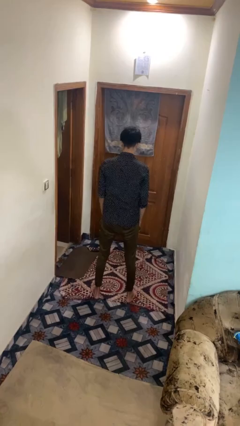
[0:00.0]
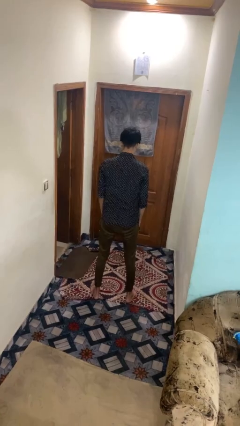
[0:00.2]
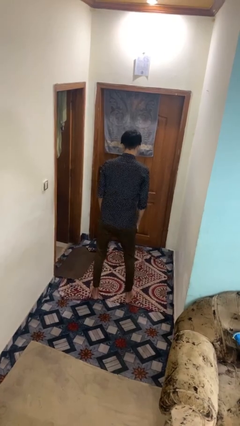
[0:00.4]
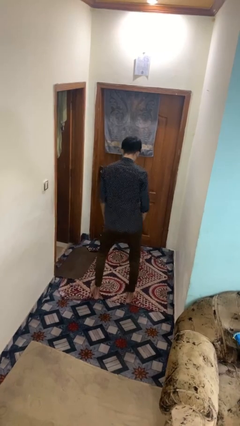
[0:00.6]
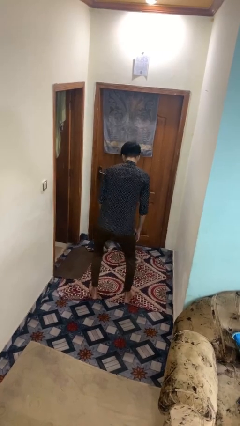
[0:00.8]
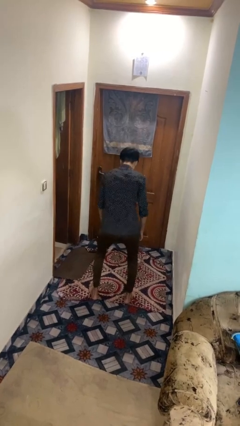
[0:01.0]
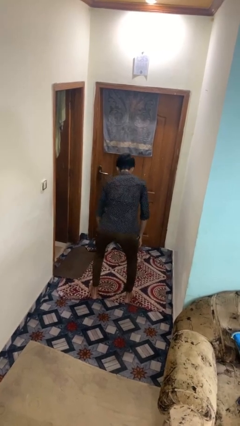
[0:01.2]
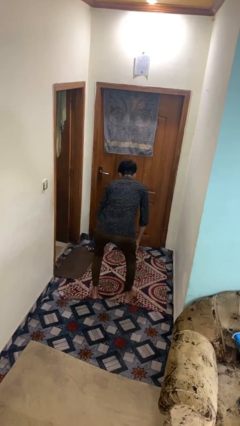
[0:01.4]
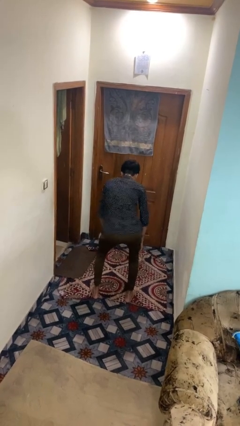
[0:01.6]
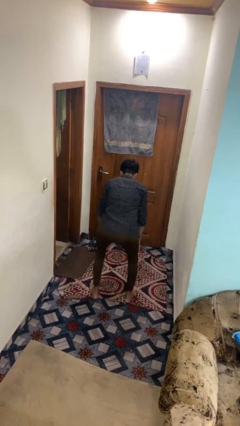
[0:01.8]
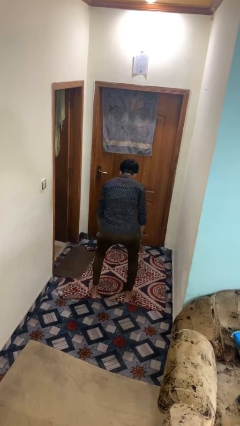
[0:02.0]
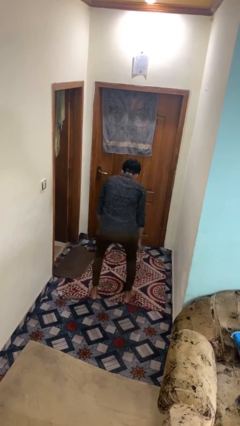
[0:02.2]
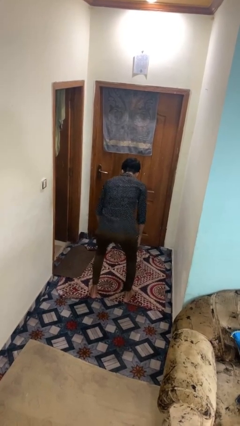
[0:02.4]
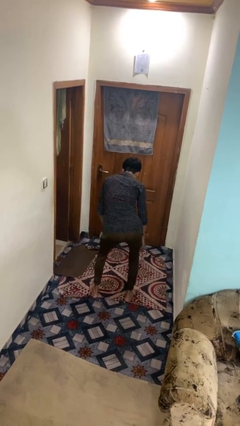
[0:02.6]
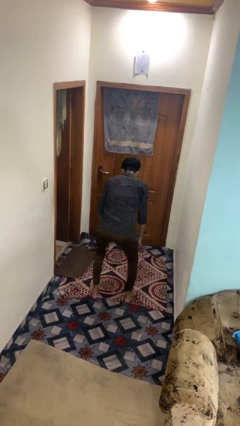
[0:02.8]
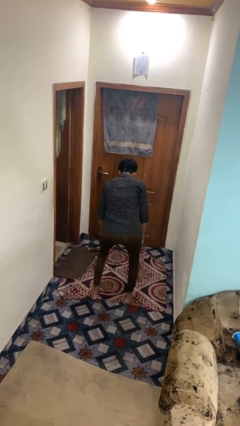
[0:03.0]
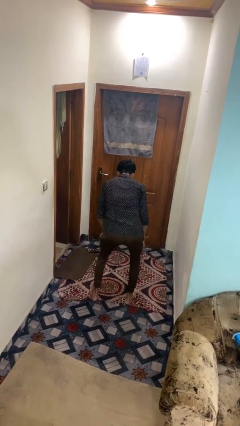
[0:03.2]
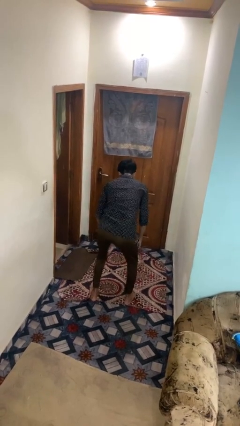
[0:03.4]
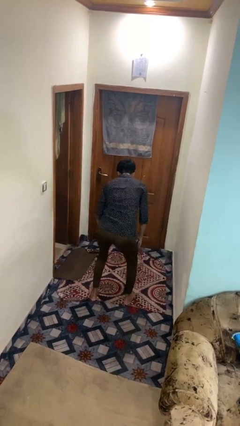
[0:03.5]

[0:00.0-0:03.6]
person wiggles hips

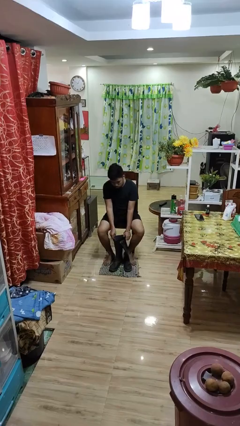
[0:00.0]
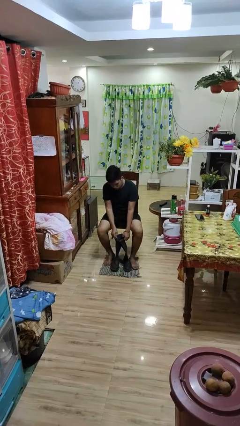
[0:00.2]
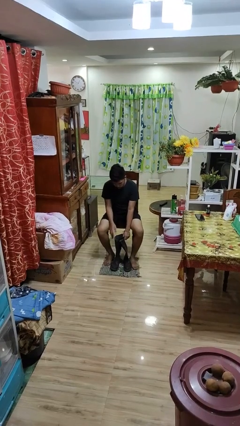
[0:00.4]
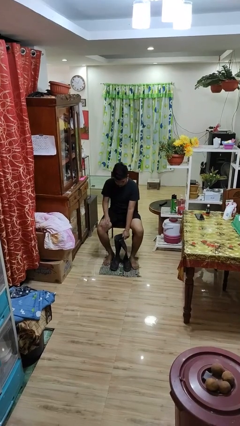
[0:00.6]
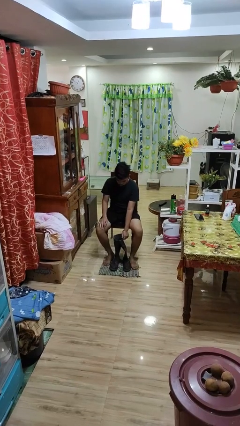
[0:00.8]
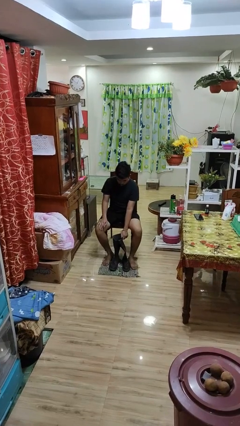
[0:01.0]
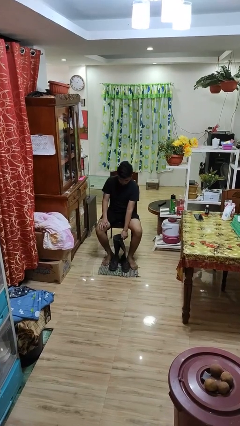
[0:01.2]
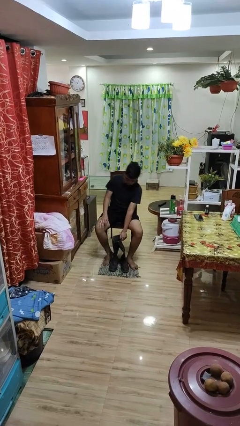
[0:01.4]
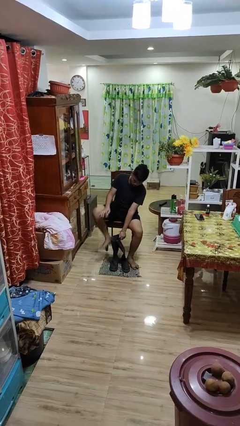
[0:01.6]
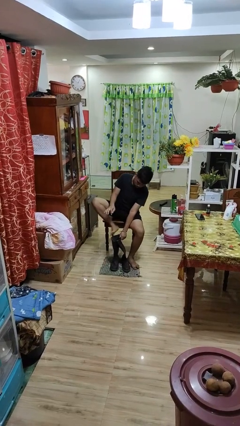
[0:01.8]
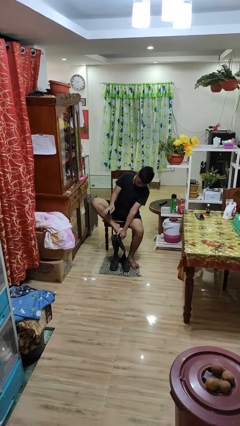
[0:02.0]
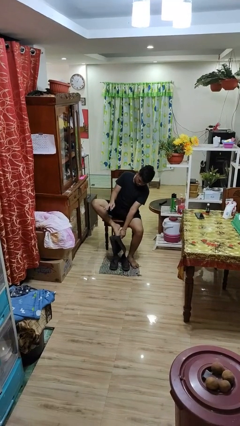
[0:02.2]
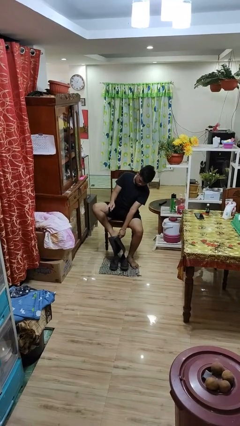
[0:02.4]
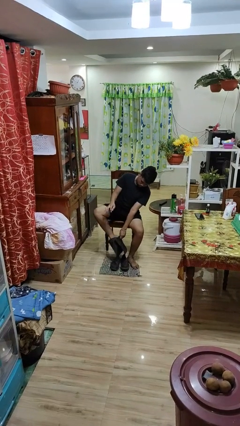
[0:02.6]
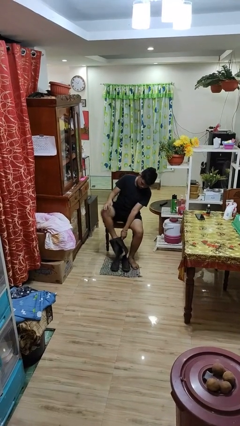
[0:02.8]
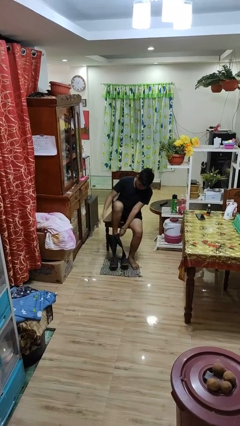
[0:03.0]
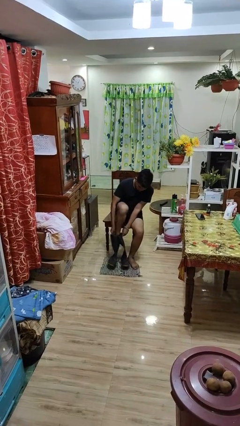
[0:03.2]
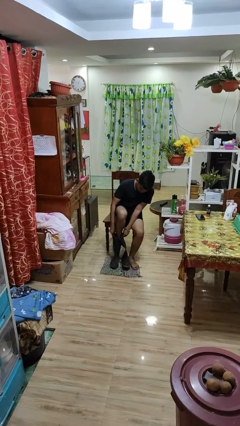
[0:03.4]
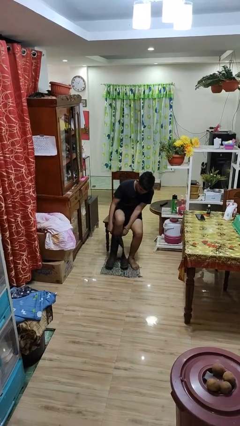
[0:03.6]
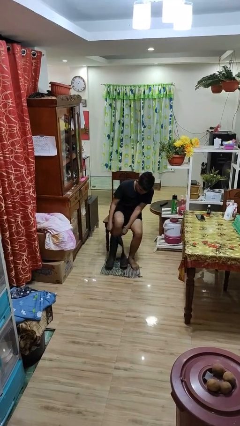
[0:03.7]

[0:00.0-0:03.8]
person uses television remote

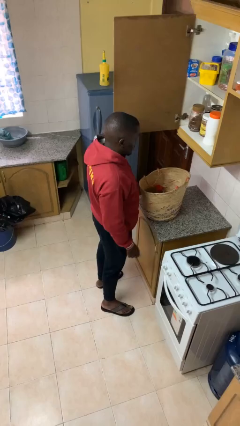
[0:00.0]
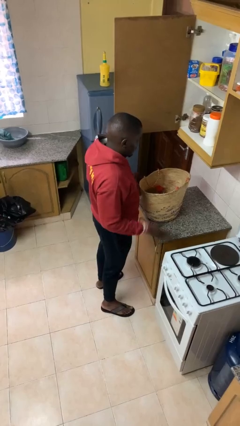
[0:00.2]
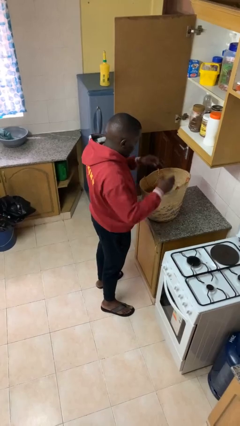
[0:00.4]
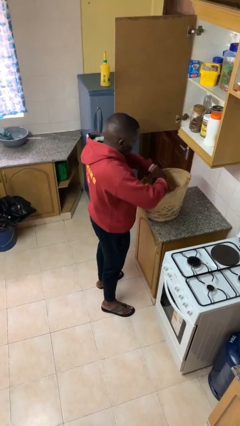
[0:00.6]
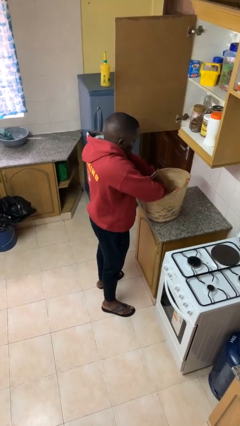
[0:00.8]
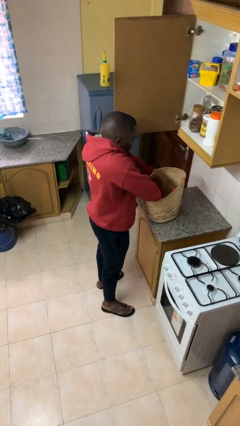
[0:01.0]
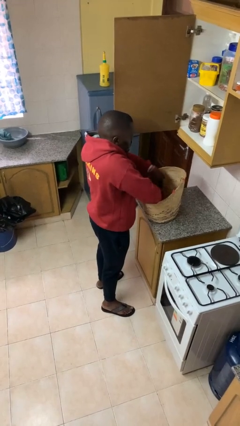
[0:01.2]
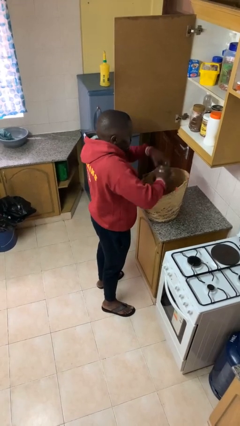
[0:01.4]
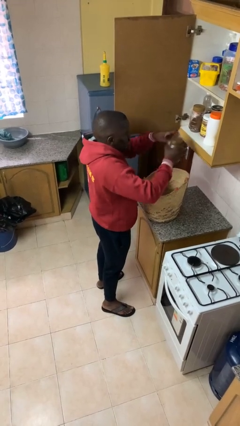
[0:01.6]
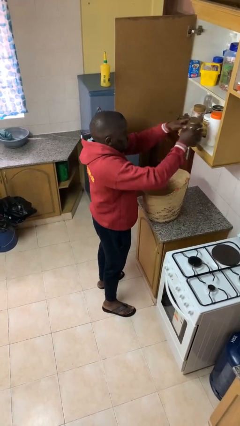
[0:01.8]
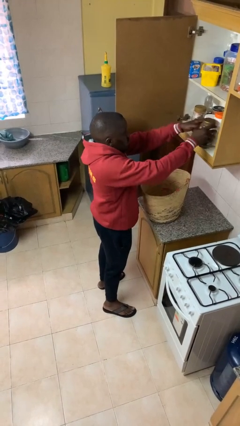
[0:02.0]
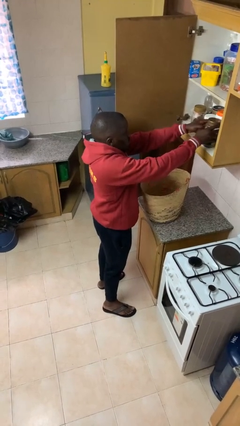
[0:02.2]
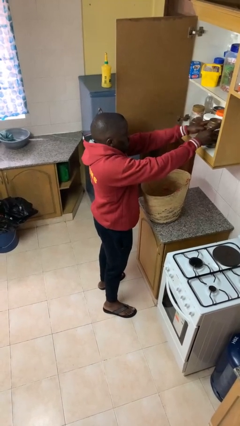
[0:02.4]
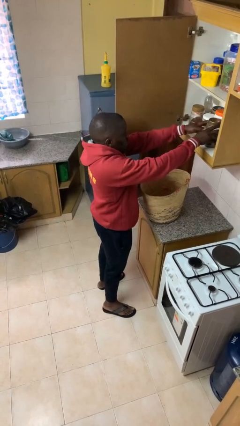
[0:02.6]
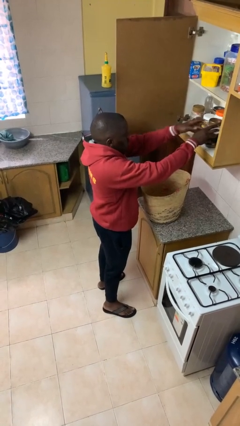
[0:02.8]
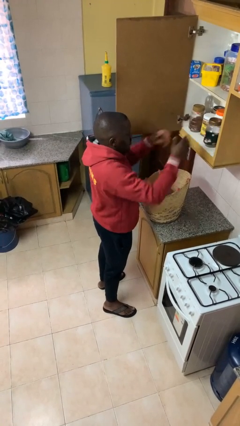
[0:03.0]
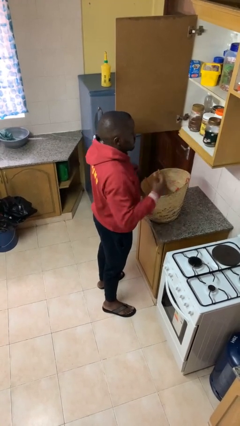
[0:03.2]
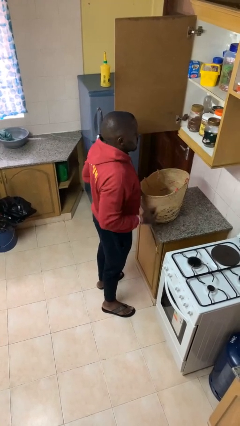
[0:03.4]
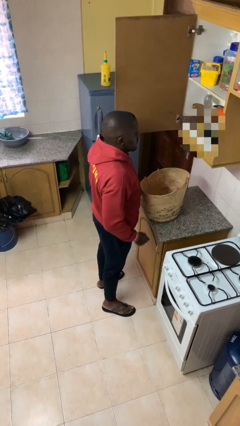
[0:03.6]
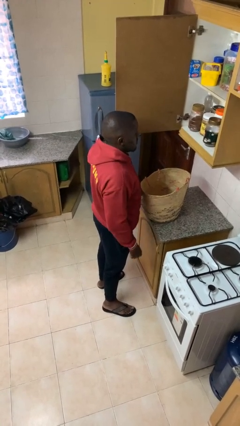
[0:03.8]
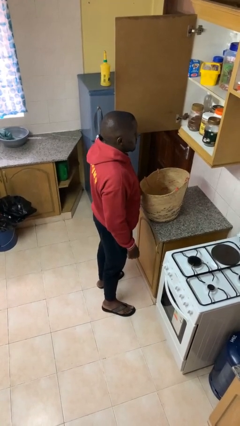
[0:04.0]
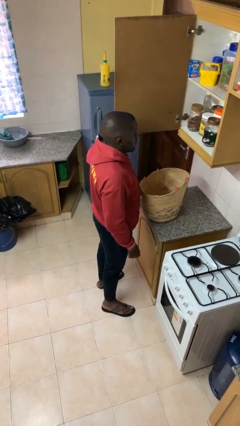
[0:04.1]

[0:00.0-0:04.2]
person loads groceries into cabinet

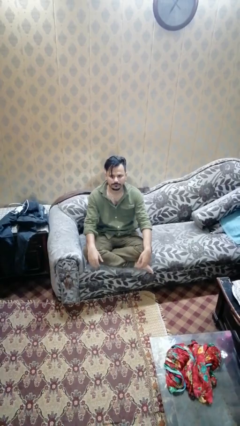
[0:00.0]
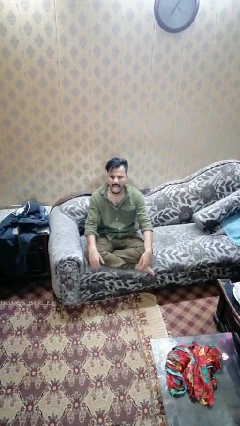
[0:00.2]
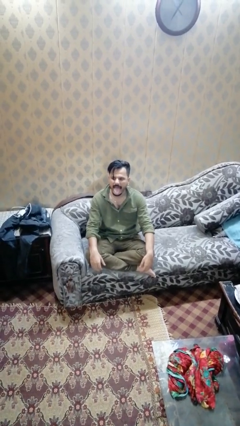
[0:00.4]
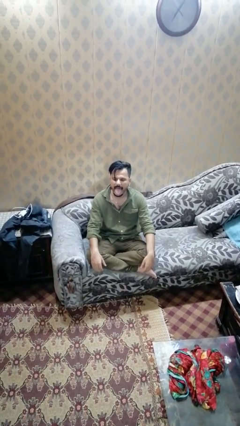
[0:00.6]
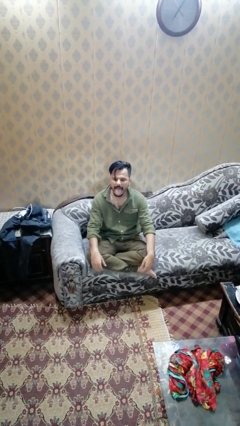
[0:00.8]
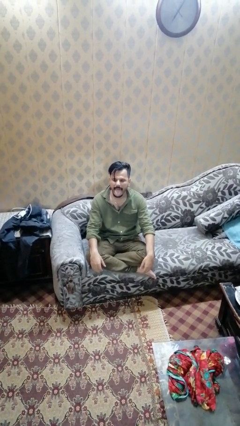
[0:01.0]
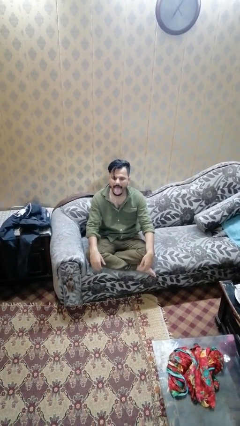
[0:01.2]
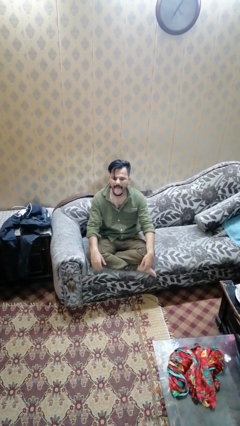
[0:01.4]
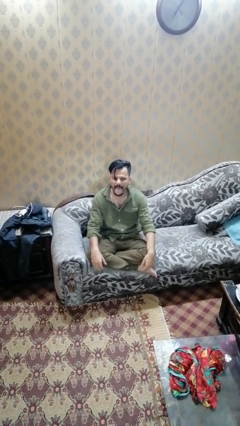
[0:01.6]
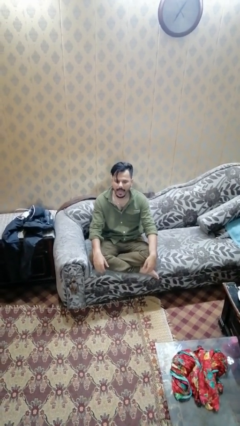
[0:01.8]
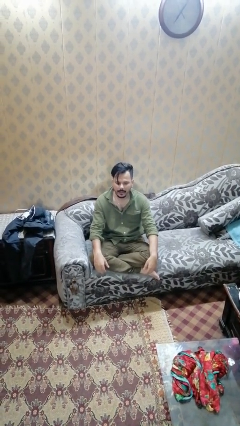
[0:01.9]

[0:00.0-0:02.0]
person sticks out tongue

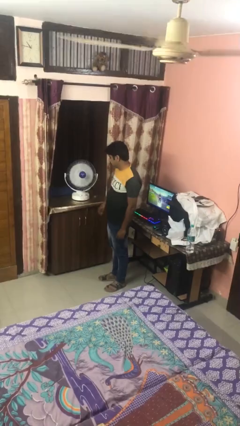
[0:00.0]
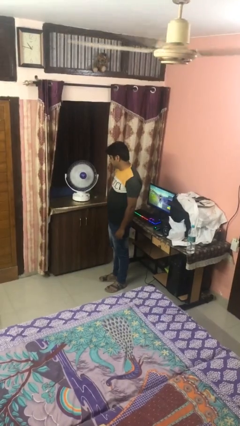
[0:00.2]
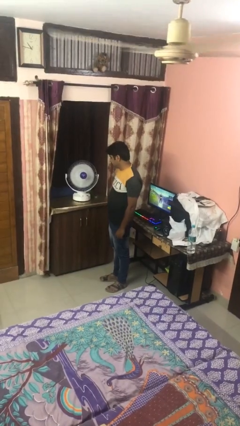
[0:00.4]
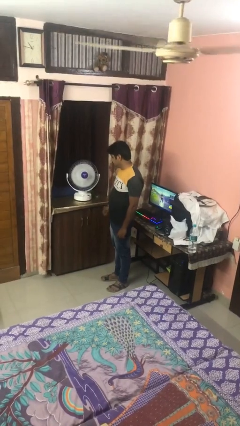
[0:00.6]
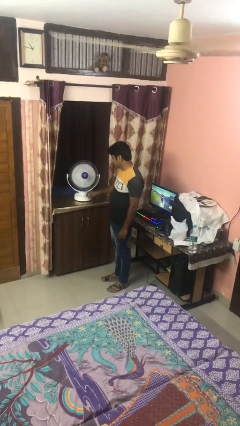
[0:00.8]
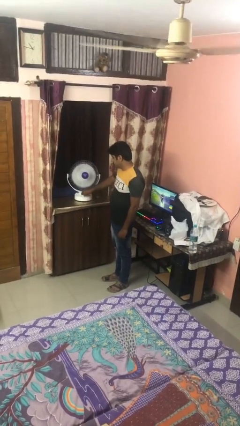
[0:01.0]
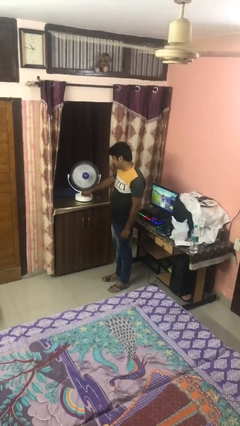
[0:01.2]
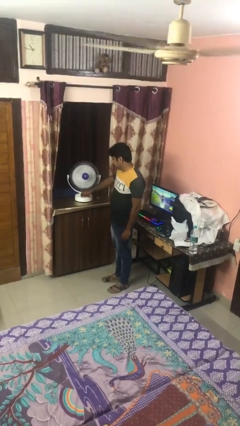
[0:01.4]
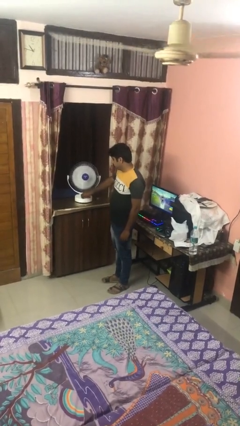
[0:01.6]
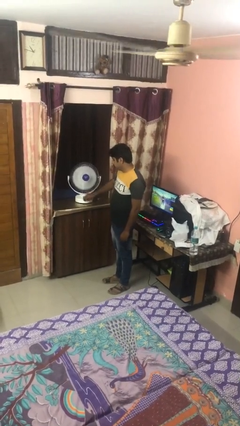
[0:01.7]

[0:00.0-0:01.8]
person turns off fan

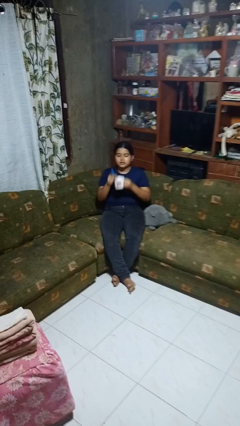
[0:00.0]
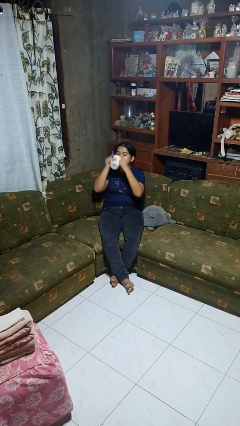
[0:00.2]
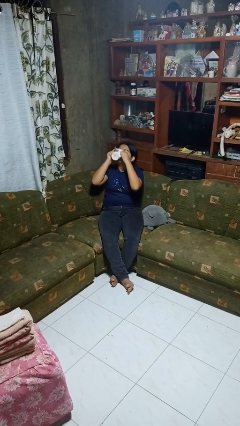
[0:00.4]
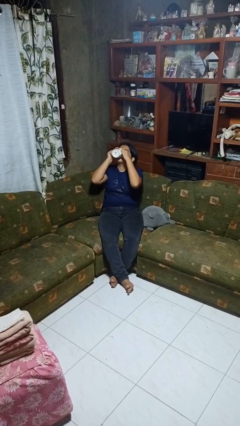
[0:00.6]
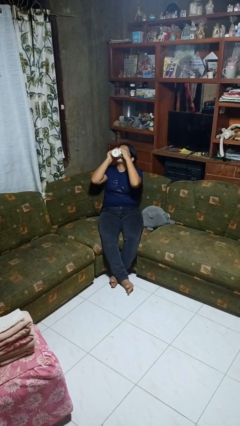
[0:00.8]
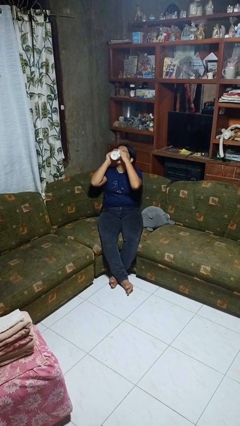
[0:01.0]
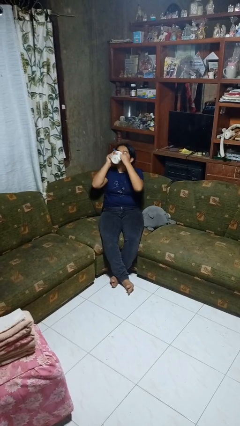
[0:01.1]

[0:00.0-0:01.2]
person drinks from mug

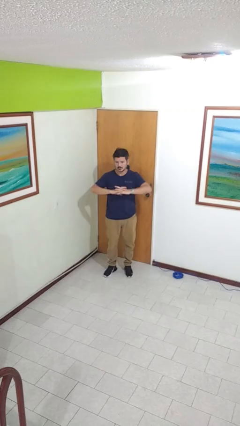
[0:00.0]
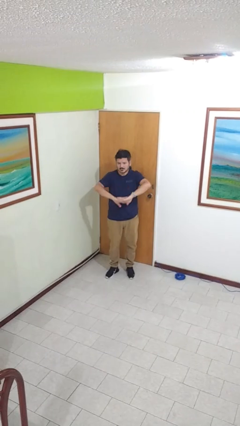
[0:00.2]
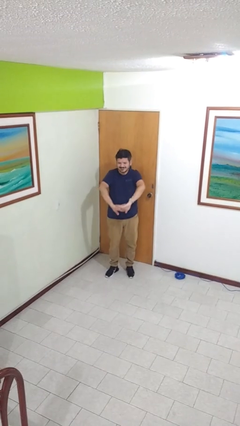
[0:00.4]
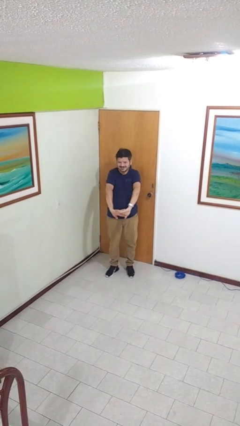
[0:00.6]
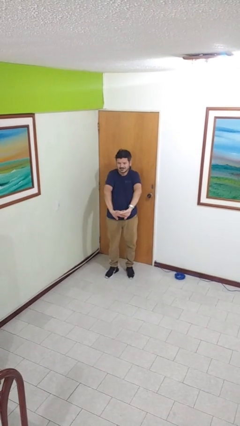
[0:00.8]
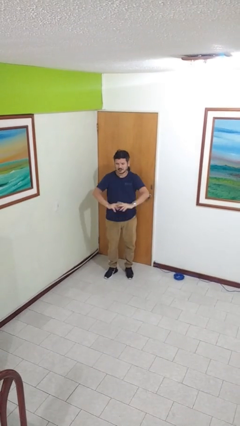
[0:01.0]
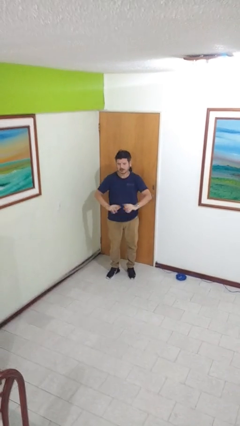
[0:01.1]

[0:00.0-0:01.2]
person cracks knuckles
